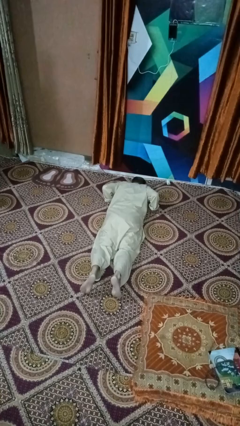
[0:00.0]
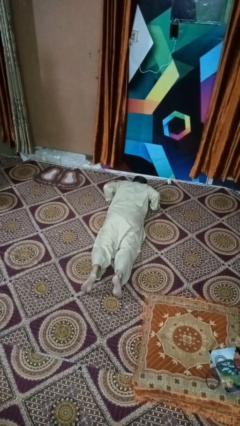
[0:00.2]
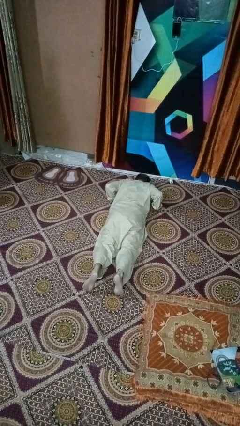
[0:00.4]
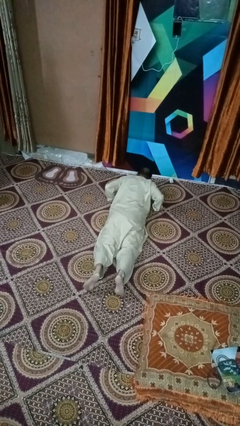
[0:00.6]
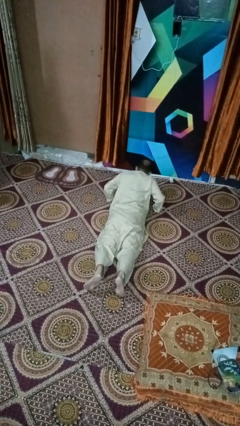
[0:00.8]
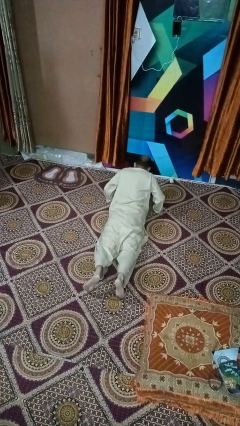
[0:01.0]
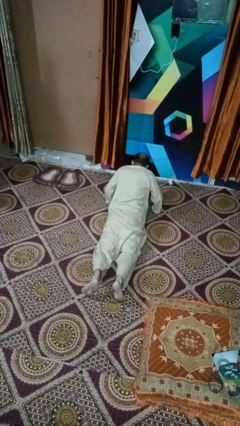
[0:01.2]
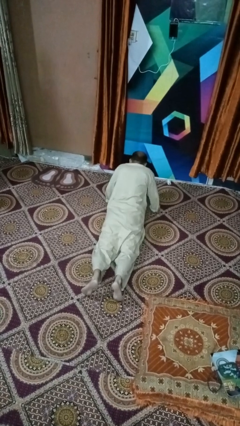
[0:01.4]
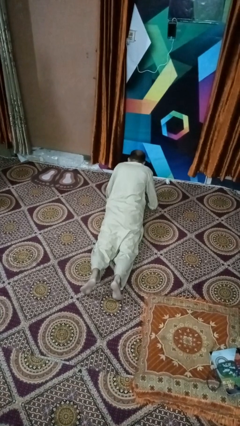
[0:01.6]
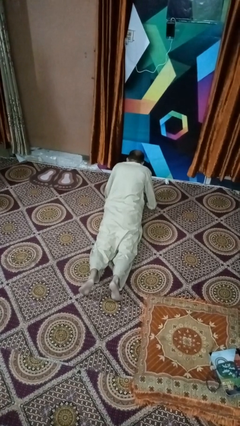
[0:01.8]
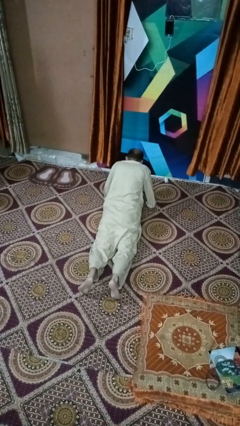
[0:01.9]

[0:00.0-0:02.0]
person exercises with situp

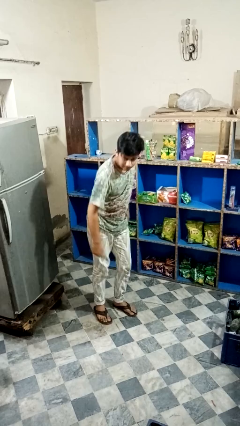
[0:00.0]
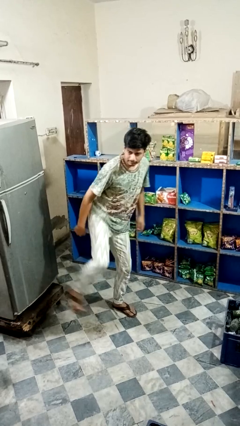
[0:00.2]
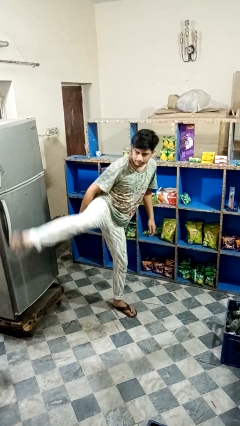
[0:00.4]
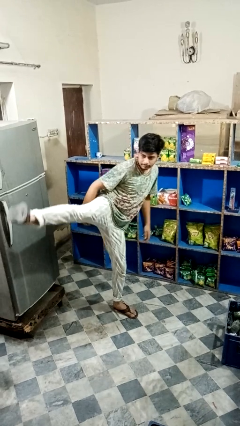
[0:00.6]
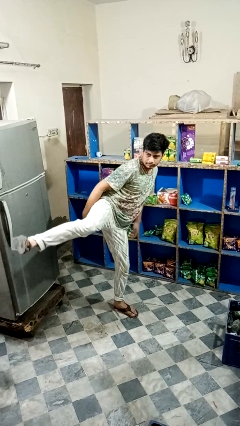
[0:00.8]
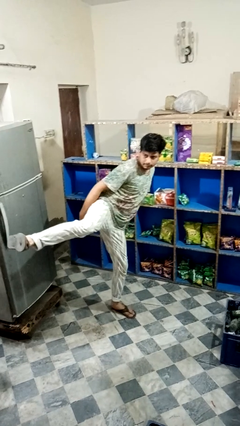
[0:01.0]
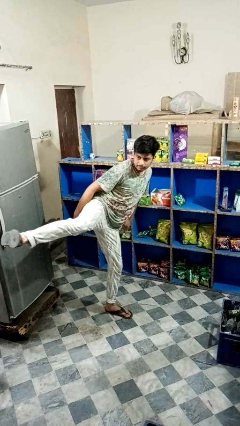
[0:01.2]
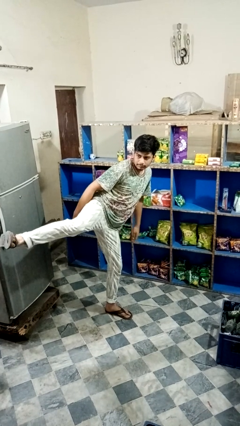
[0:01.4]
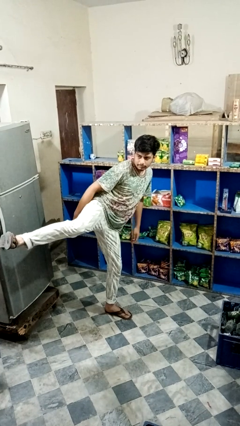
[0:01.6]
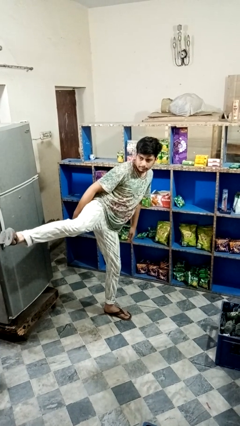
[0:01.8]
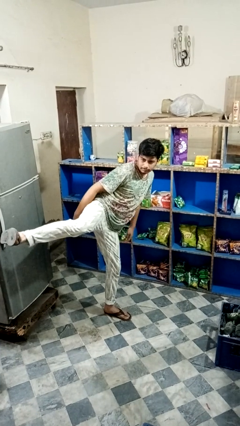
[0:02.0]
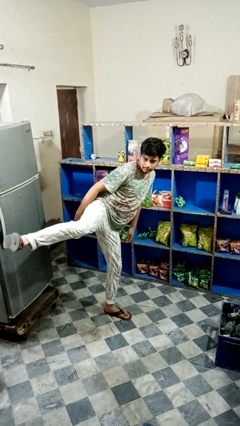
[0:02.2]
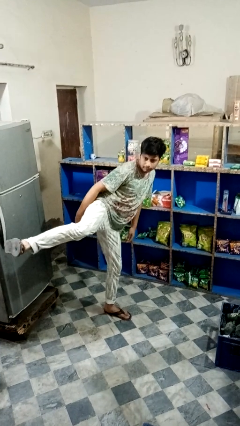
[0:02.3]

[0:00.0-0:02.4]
person karate kicks

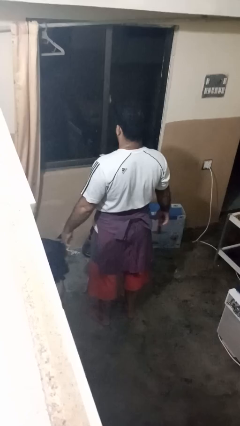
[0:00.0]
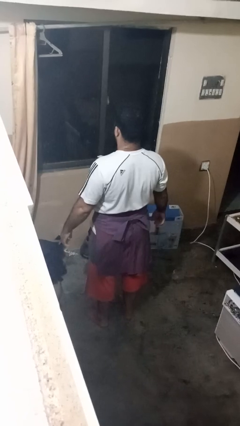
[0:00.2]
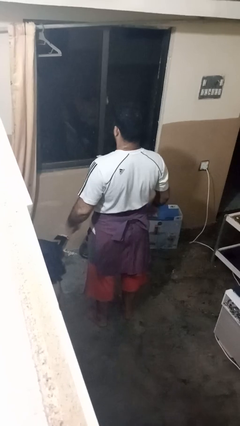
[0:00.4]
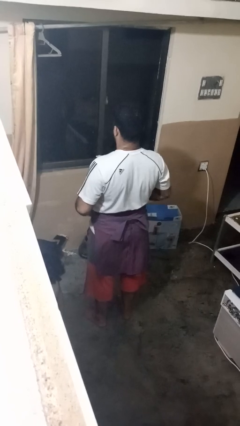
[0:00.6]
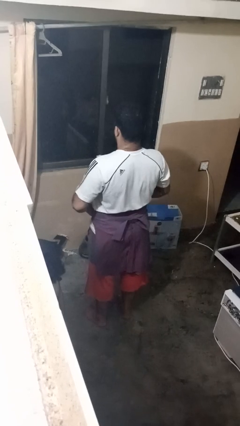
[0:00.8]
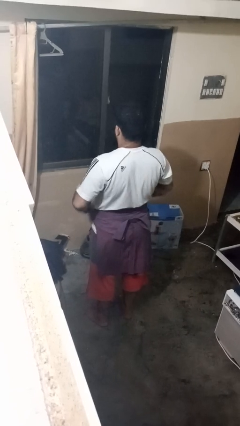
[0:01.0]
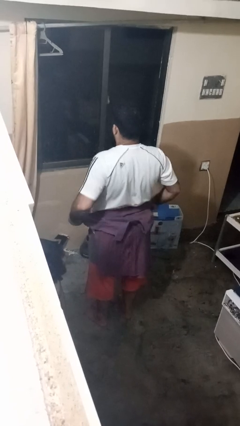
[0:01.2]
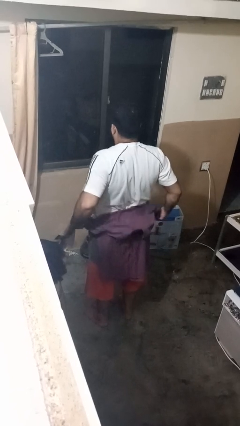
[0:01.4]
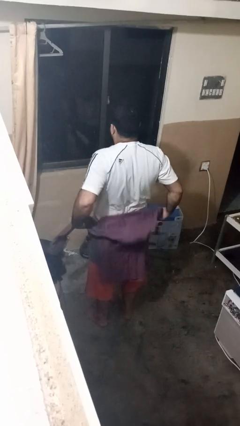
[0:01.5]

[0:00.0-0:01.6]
person unties jacket around waist

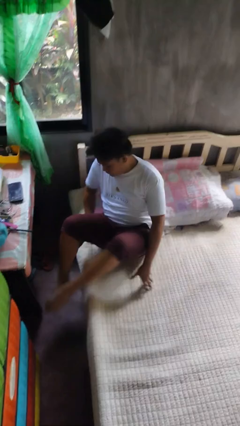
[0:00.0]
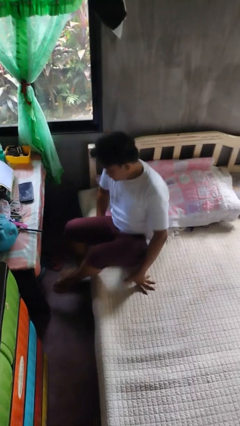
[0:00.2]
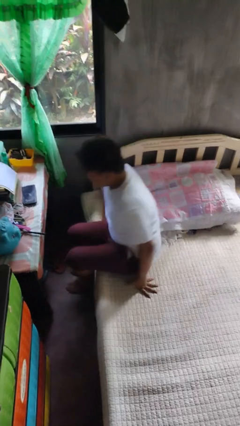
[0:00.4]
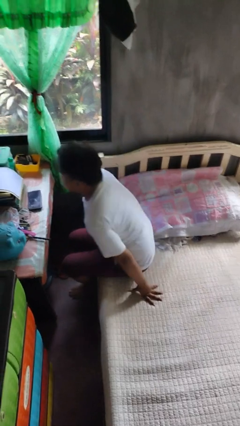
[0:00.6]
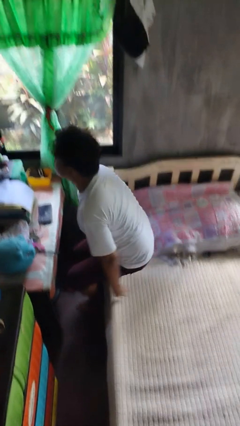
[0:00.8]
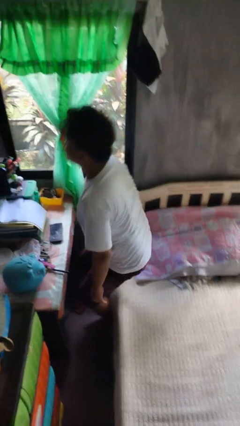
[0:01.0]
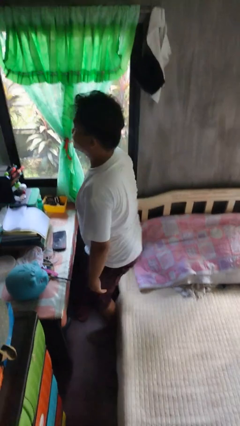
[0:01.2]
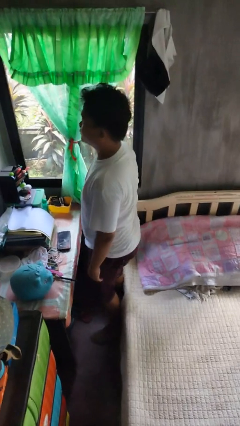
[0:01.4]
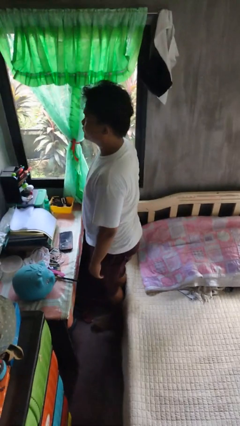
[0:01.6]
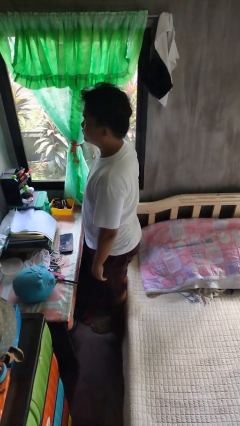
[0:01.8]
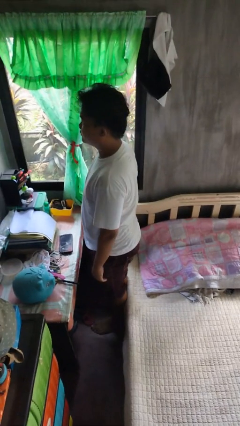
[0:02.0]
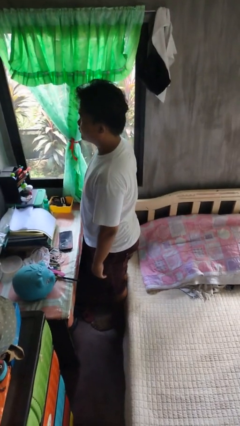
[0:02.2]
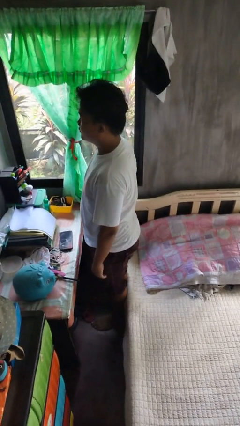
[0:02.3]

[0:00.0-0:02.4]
person stands up

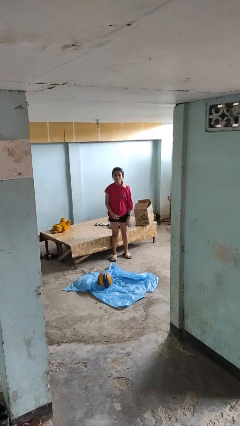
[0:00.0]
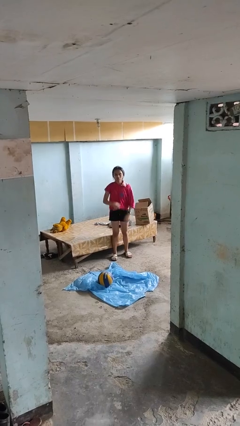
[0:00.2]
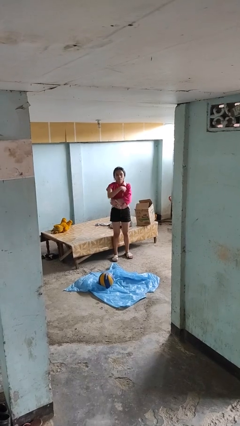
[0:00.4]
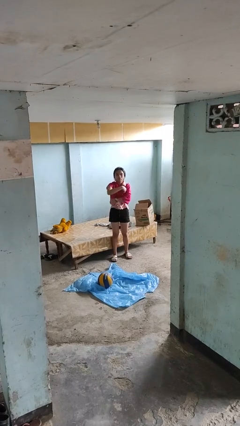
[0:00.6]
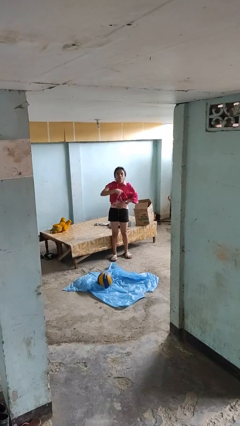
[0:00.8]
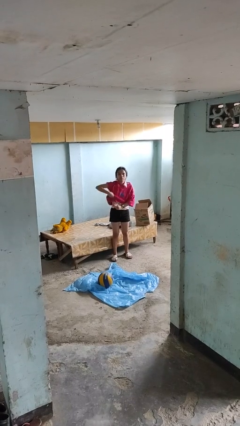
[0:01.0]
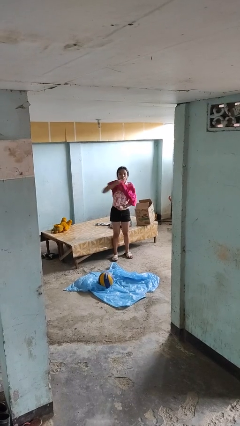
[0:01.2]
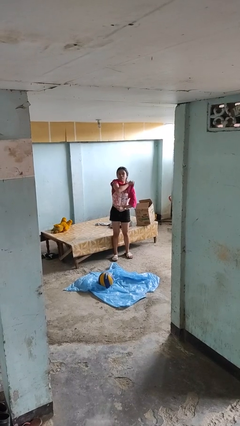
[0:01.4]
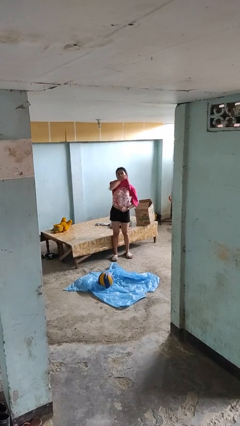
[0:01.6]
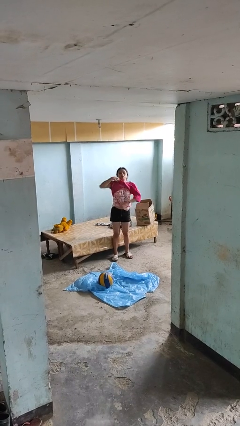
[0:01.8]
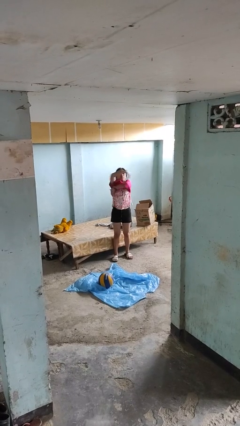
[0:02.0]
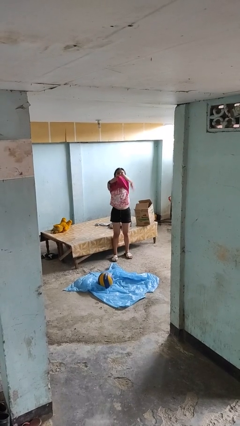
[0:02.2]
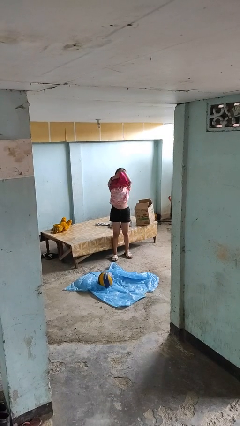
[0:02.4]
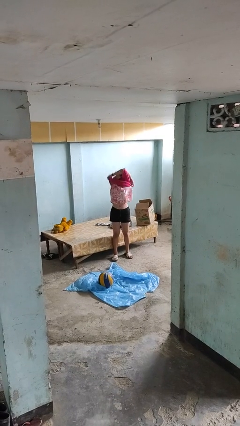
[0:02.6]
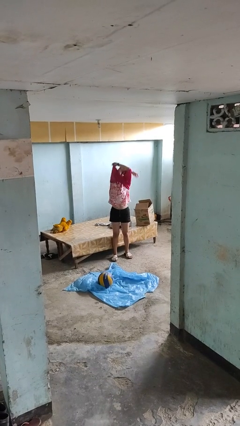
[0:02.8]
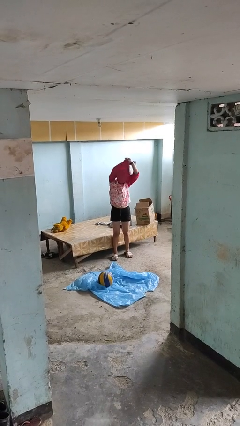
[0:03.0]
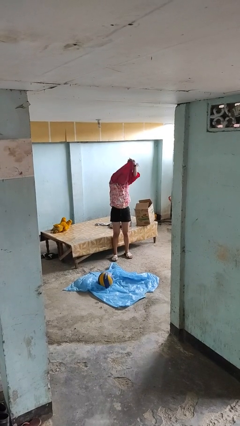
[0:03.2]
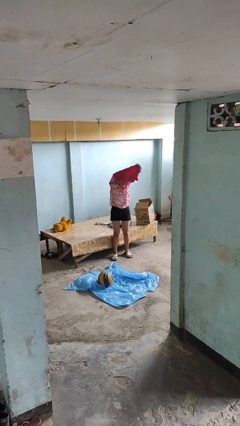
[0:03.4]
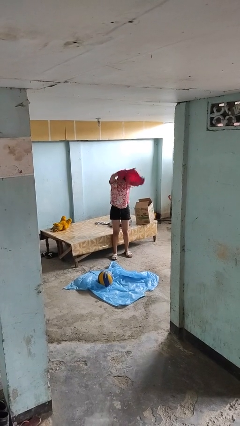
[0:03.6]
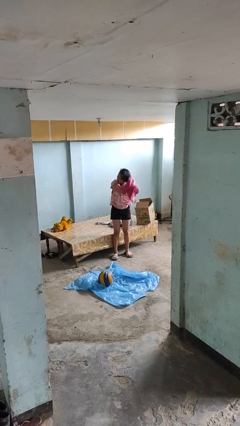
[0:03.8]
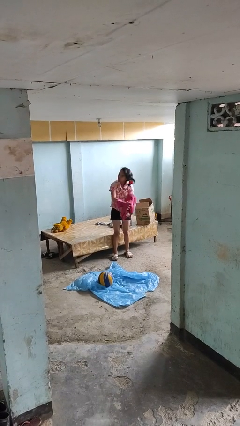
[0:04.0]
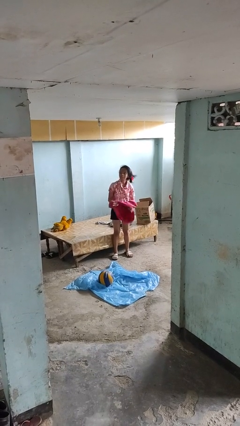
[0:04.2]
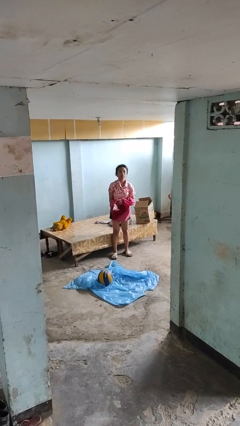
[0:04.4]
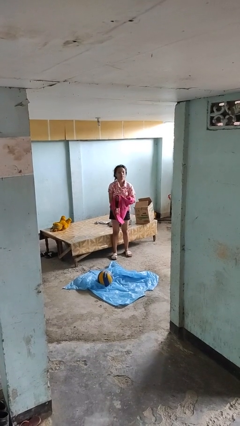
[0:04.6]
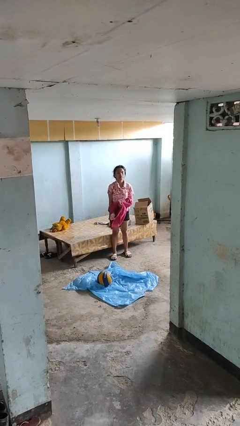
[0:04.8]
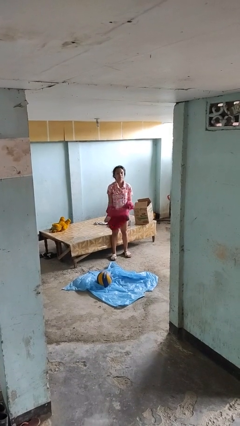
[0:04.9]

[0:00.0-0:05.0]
person takes off shirt

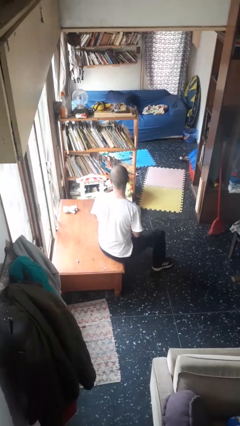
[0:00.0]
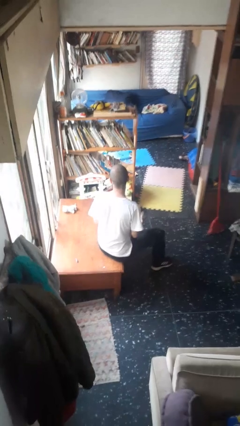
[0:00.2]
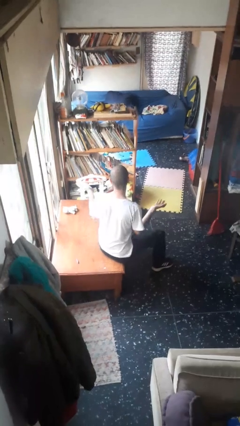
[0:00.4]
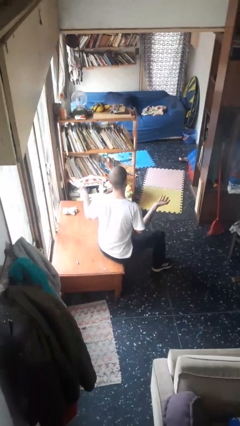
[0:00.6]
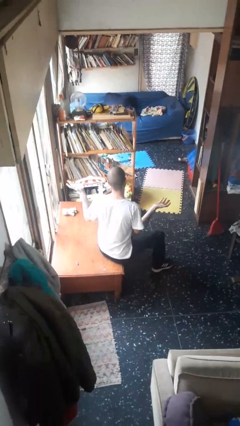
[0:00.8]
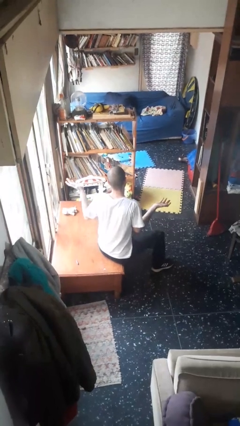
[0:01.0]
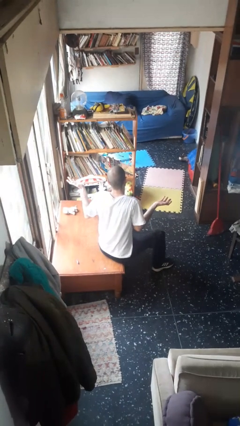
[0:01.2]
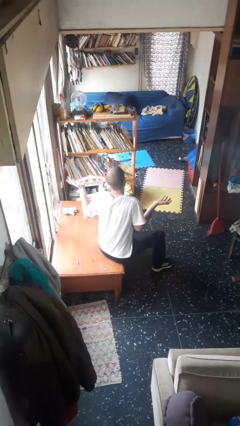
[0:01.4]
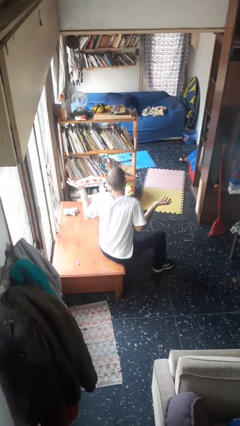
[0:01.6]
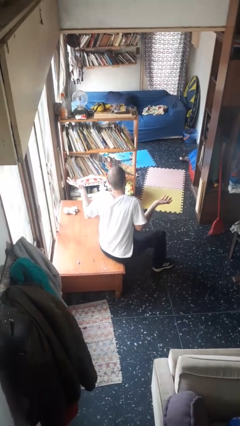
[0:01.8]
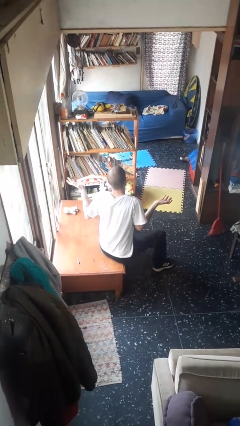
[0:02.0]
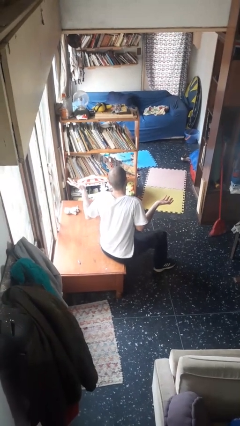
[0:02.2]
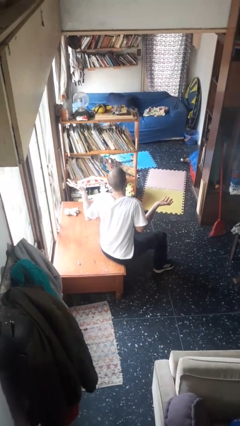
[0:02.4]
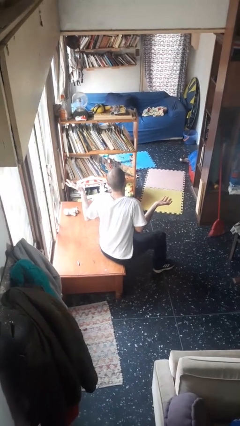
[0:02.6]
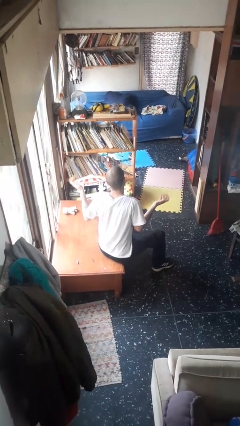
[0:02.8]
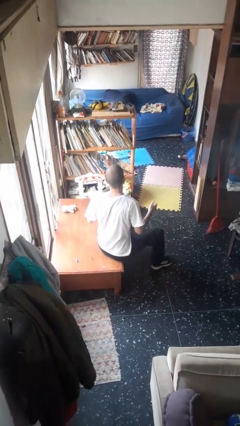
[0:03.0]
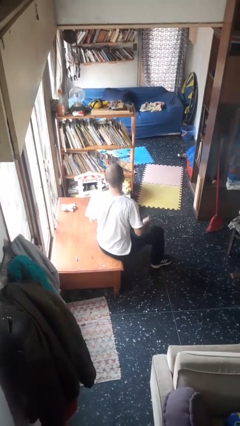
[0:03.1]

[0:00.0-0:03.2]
person shrugs

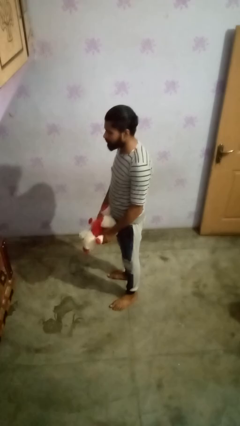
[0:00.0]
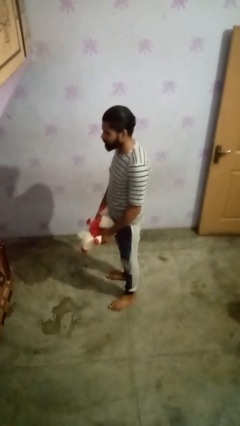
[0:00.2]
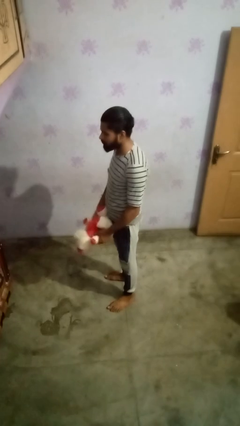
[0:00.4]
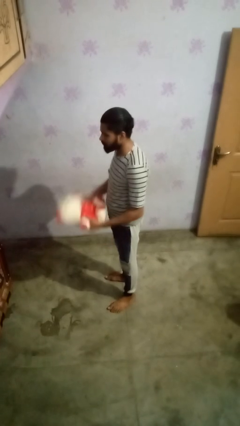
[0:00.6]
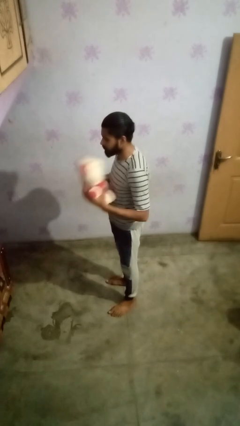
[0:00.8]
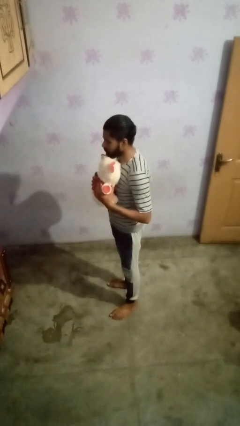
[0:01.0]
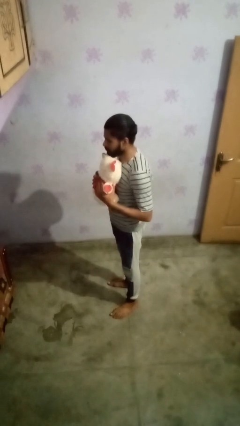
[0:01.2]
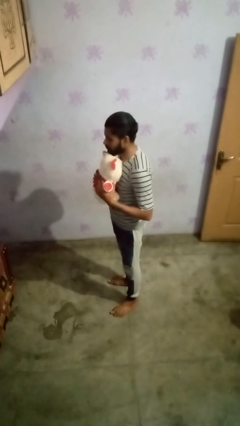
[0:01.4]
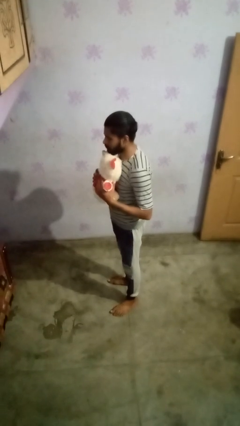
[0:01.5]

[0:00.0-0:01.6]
person hugs stuffed animal
